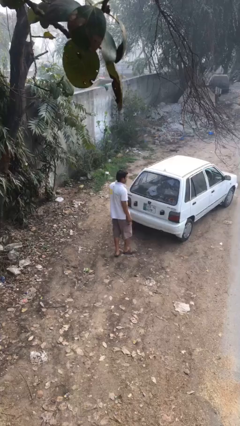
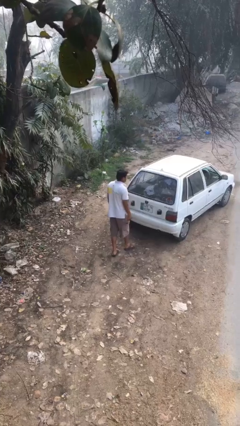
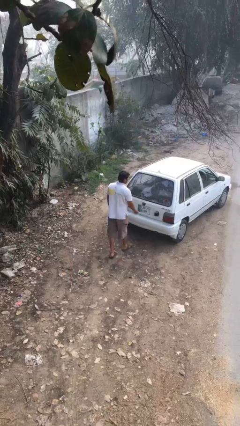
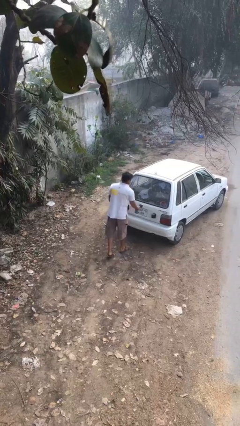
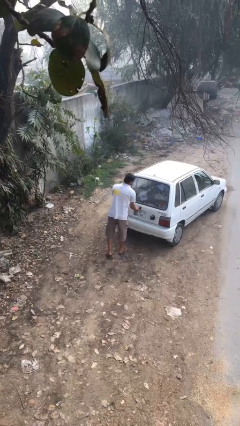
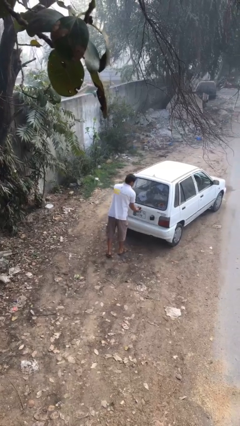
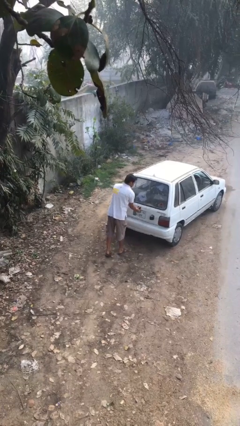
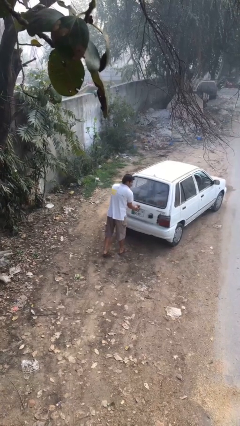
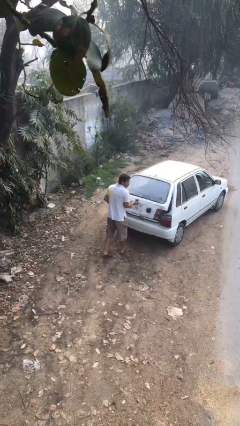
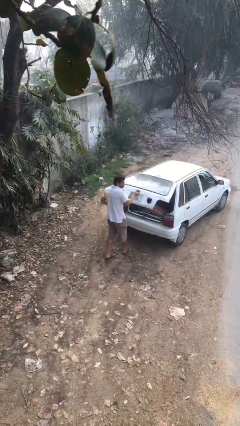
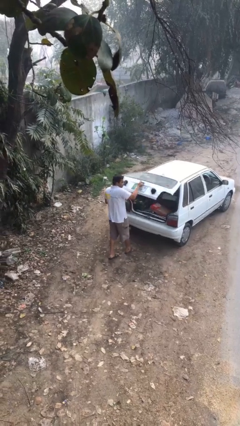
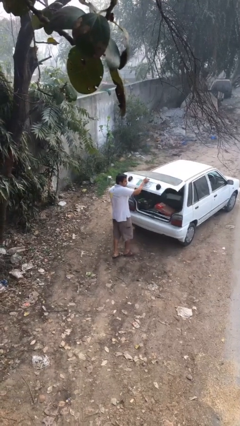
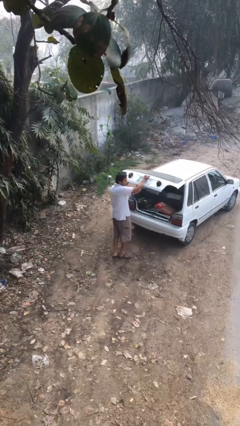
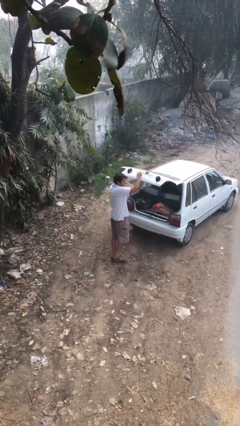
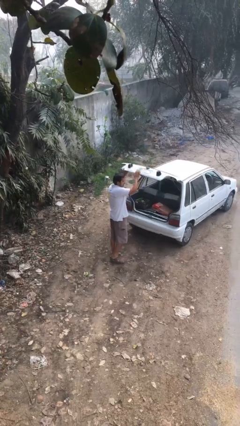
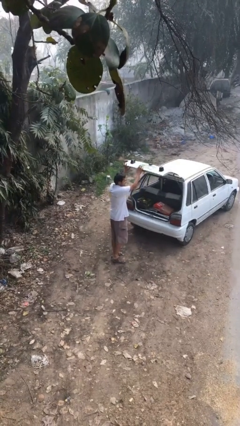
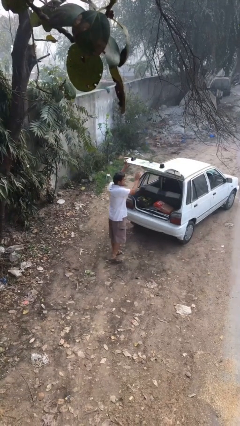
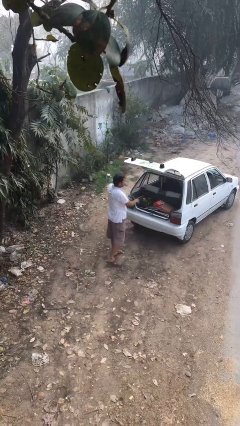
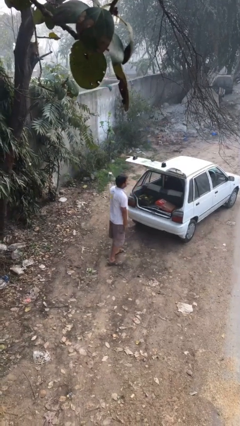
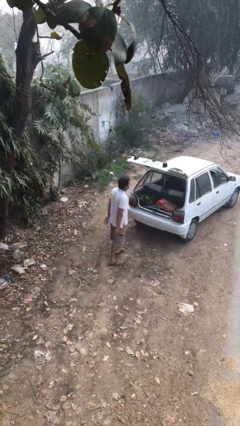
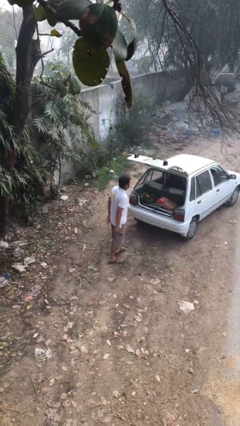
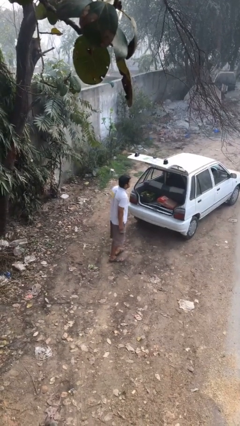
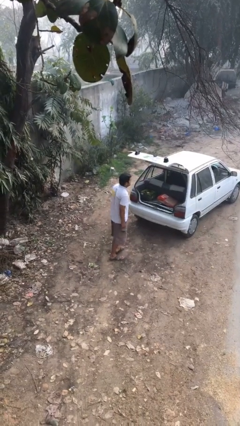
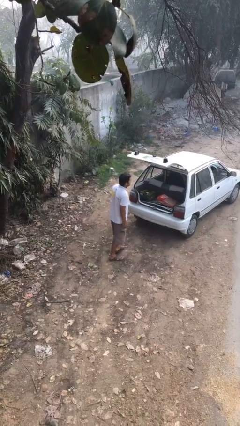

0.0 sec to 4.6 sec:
person opens car trunk

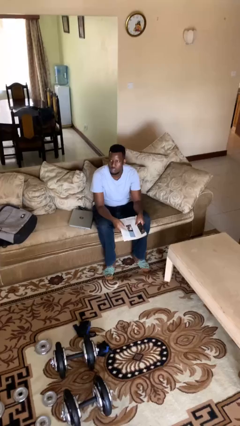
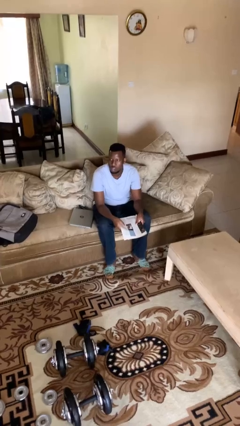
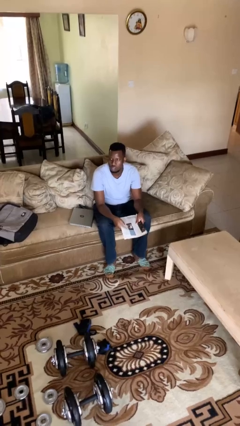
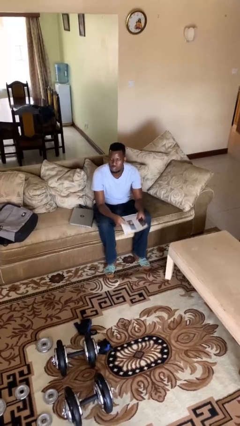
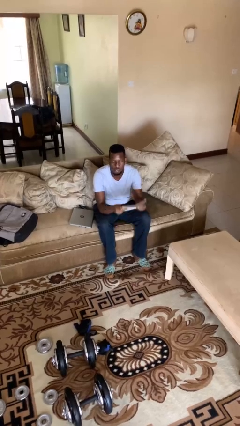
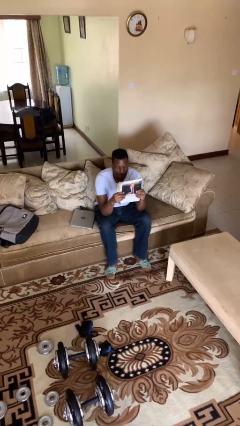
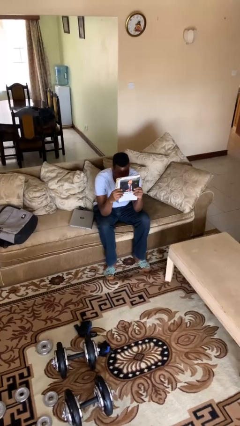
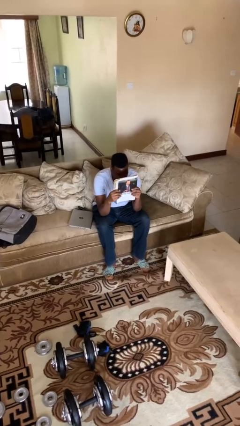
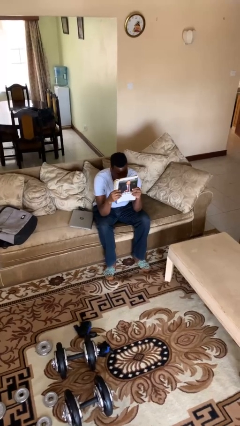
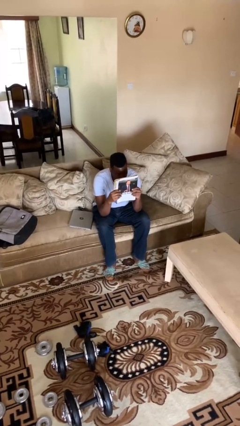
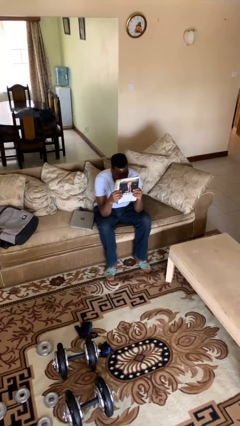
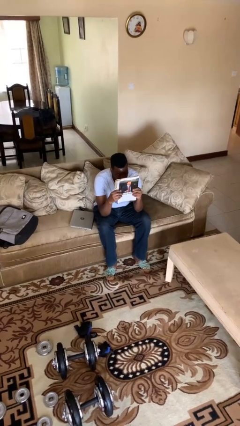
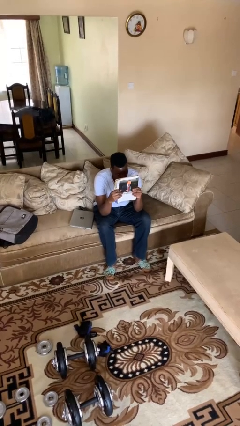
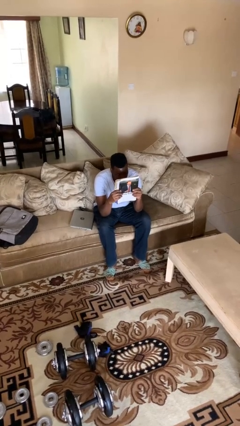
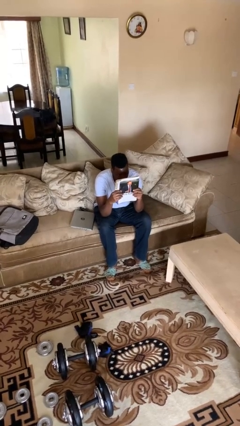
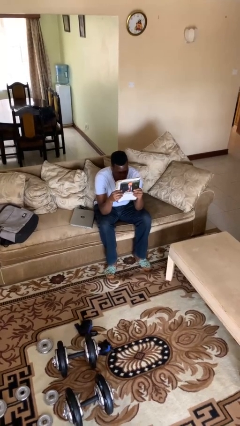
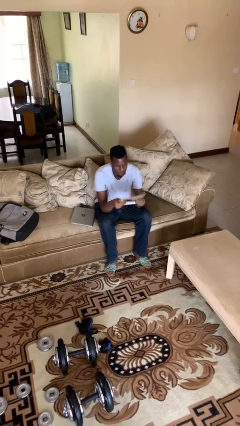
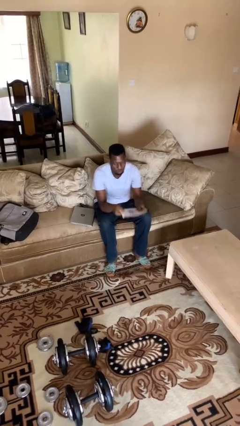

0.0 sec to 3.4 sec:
person reads document

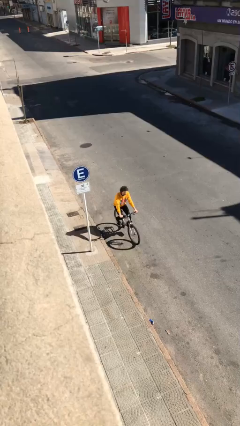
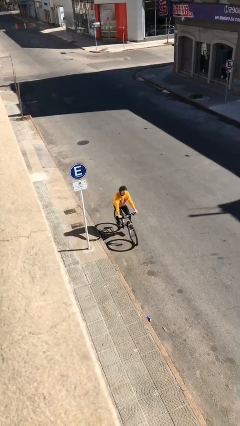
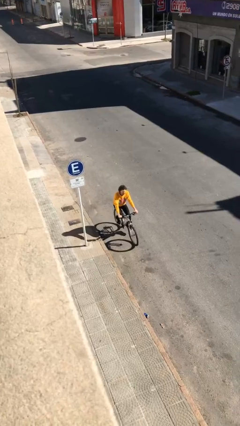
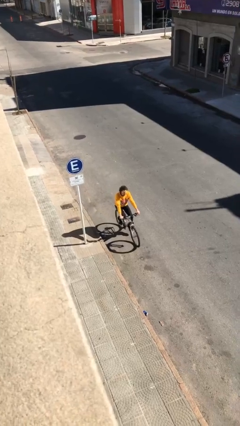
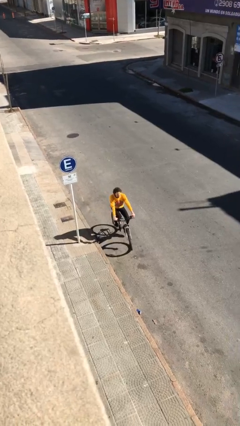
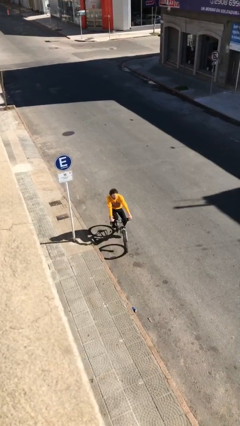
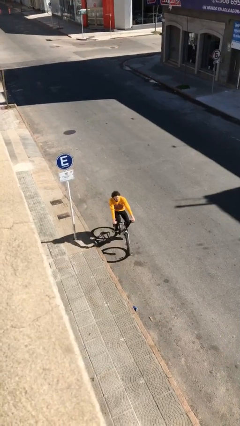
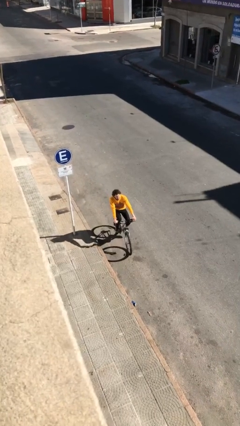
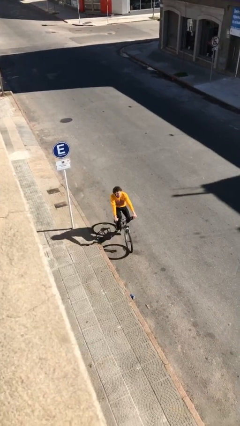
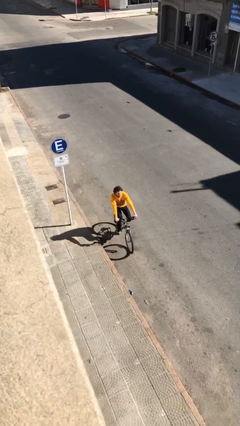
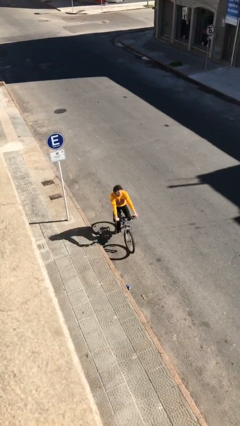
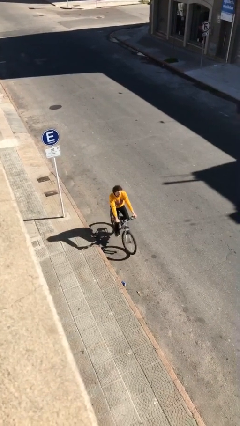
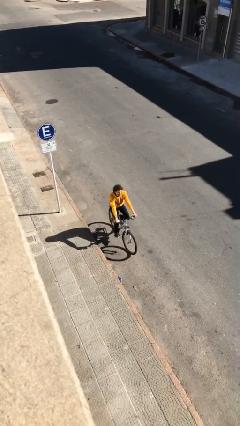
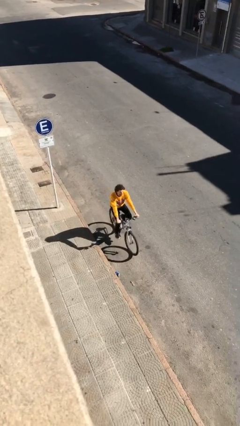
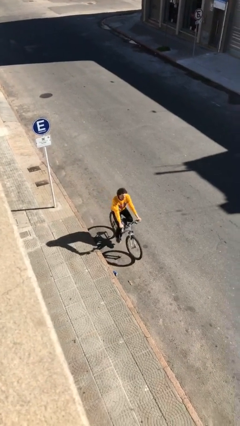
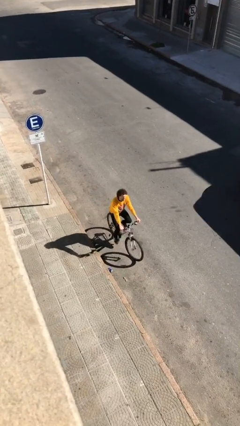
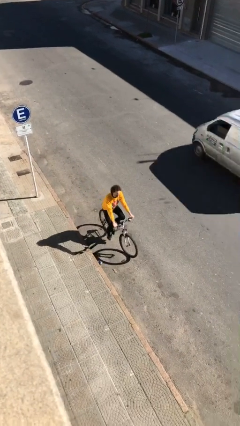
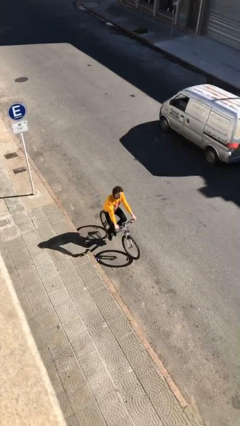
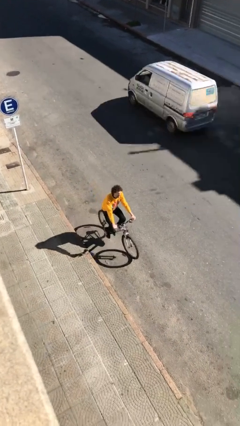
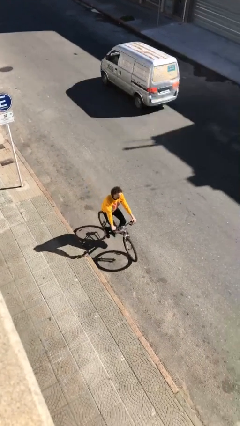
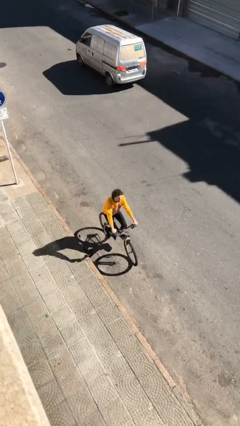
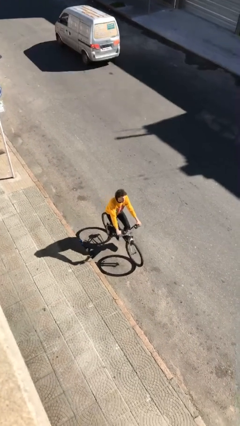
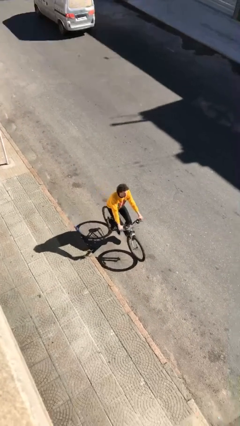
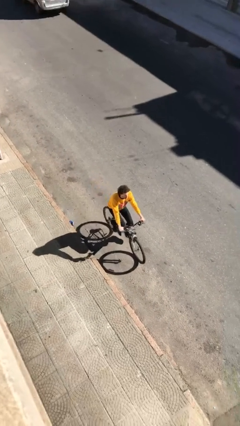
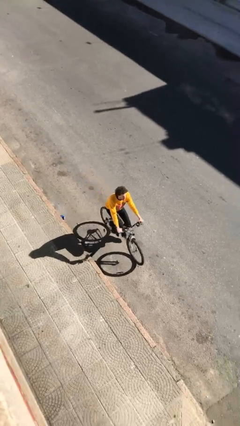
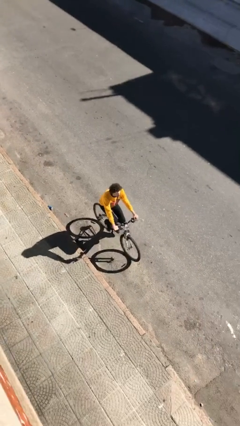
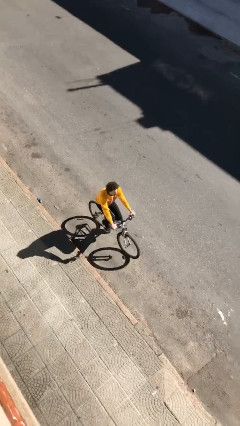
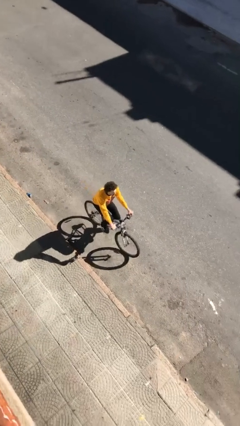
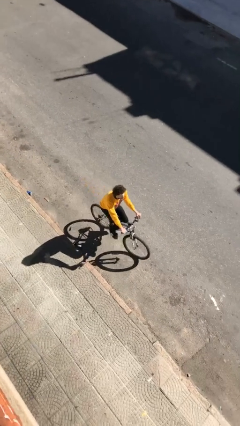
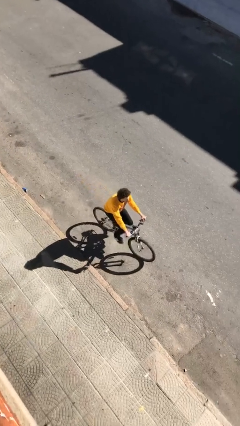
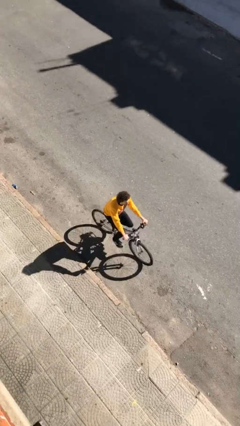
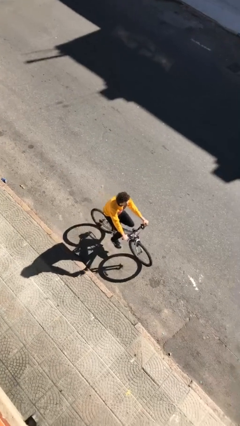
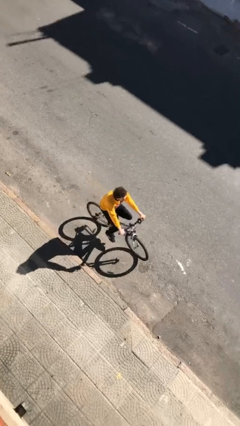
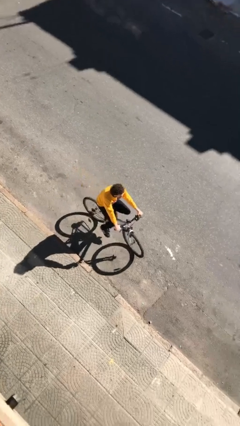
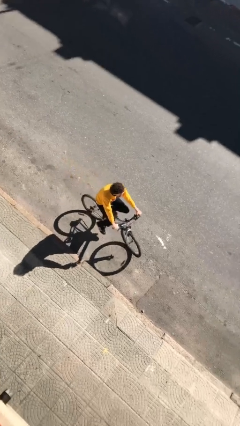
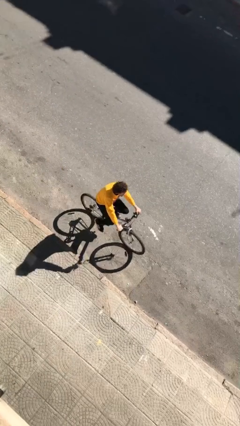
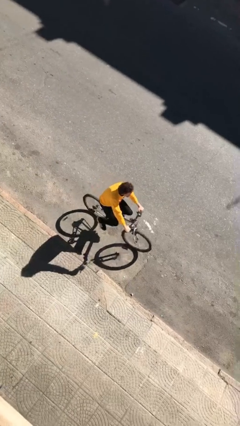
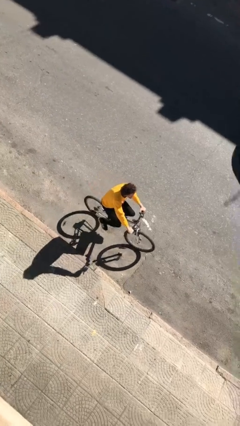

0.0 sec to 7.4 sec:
person rides bicycle

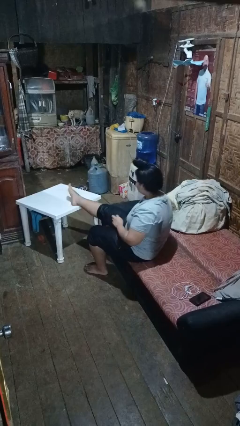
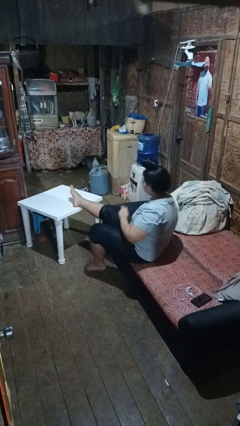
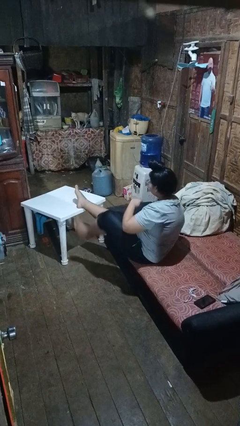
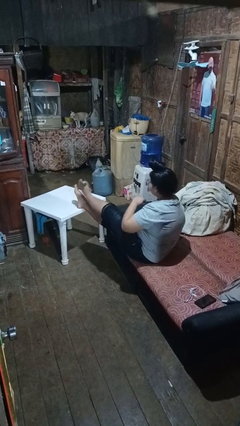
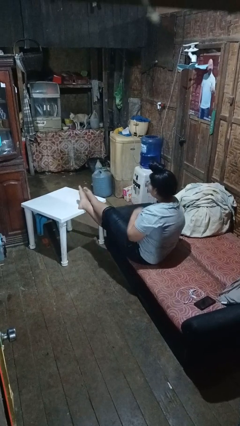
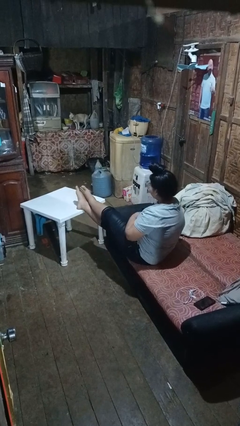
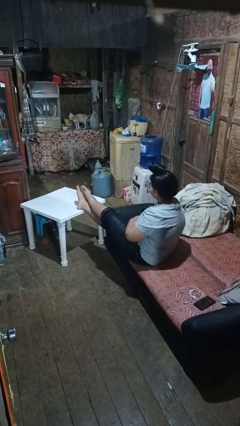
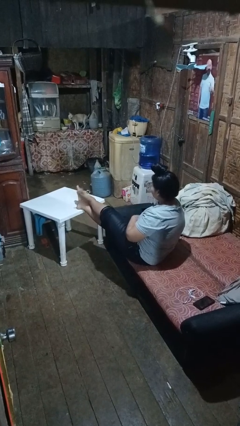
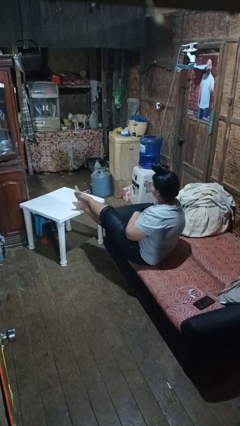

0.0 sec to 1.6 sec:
person puts feet up

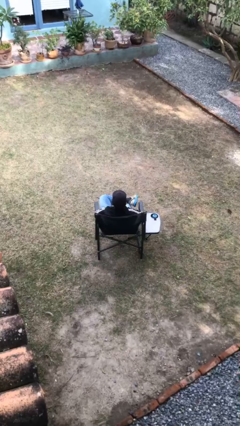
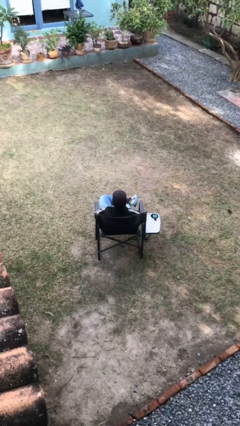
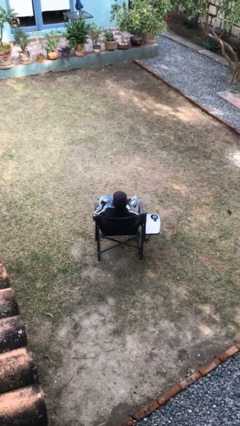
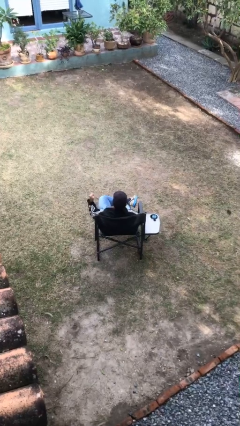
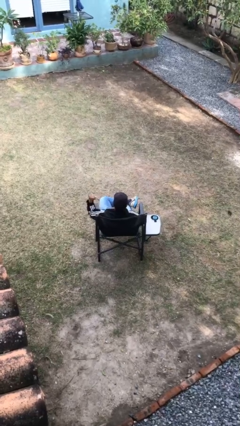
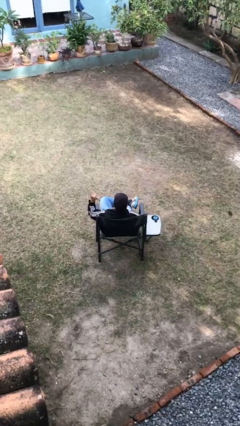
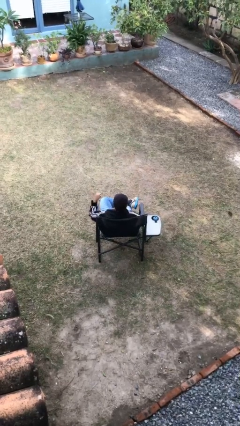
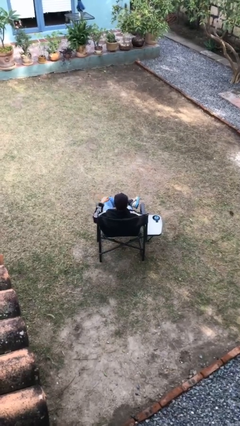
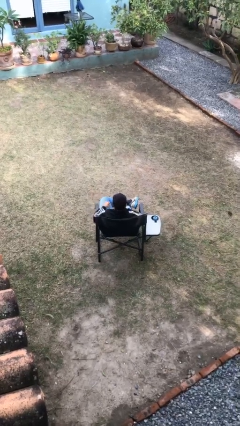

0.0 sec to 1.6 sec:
person gestures hang loose
